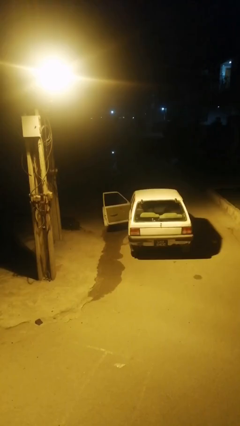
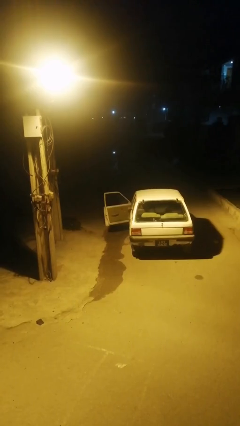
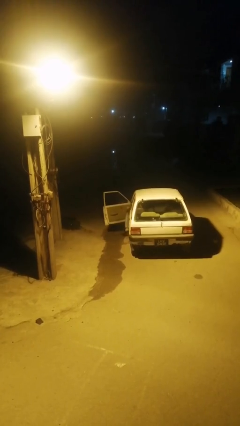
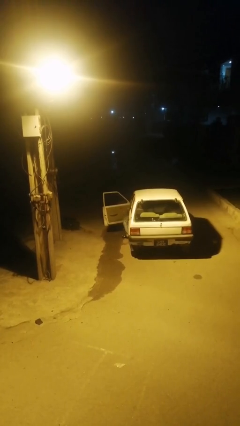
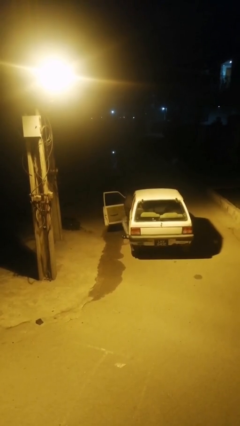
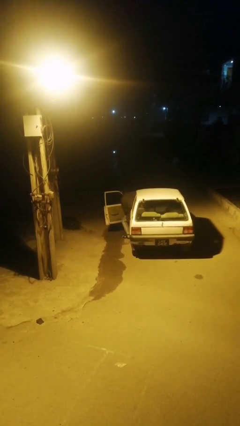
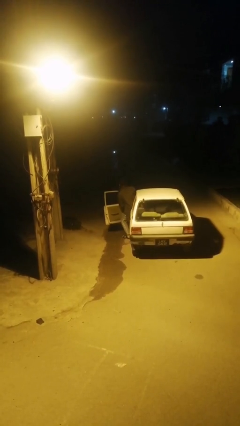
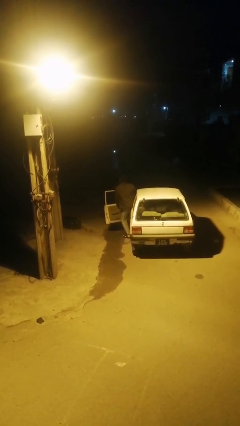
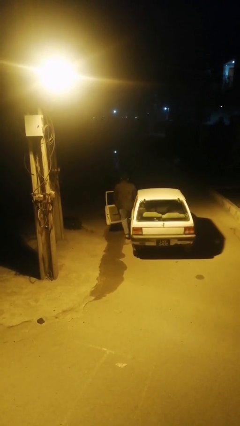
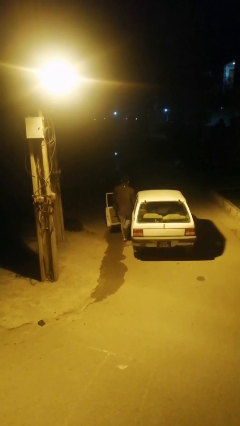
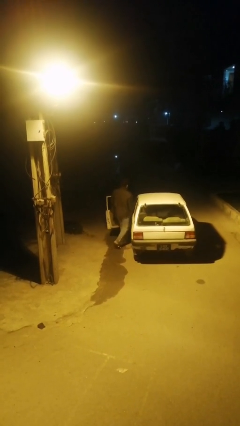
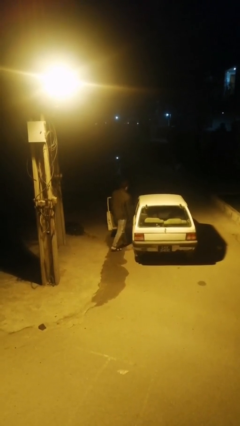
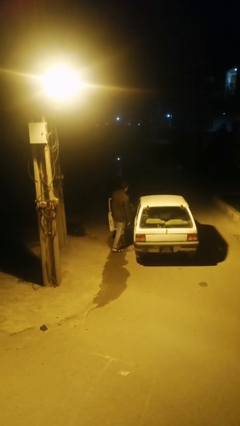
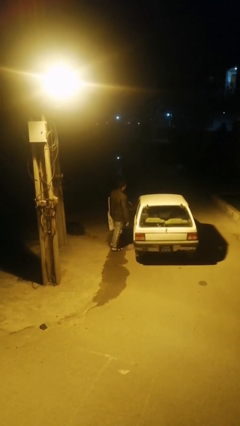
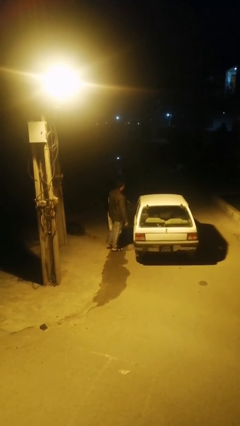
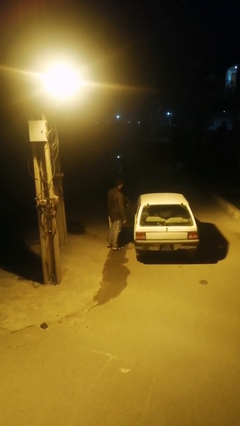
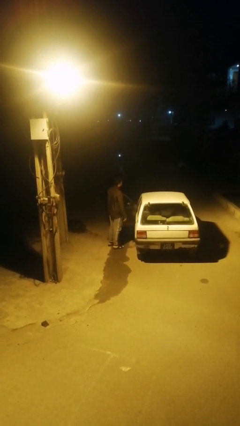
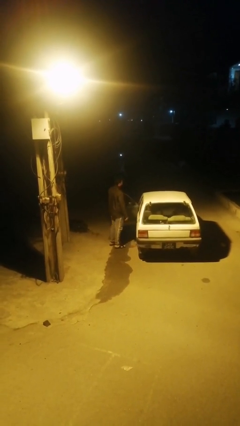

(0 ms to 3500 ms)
person exits car

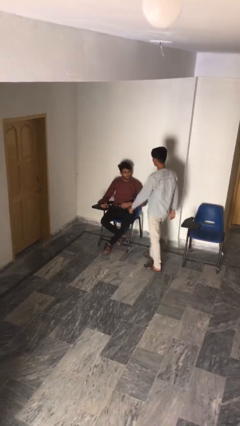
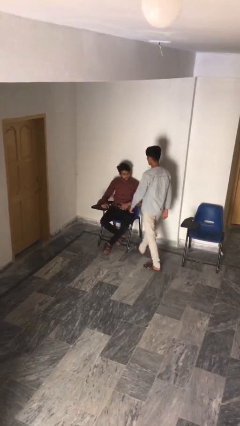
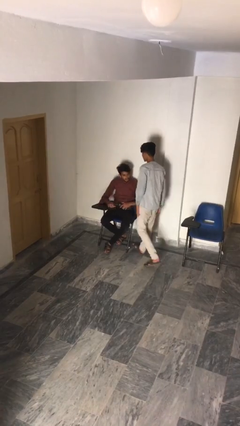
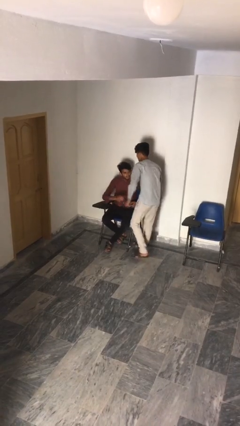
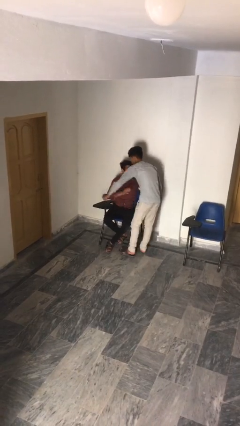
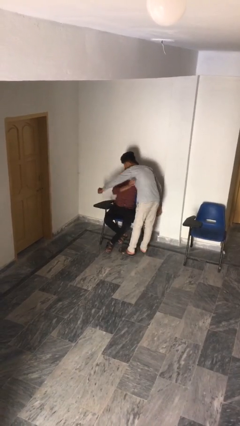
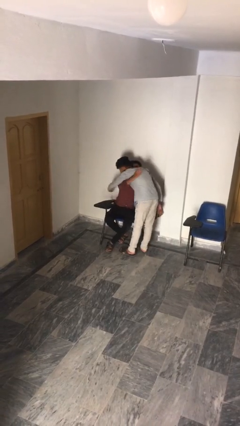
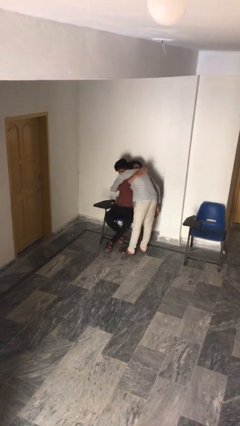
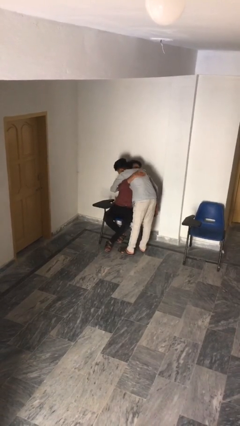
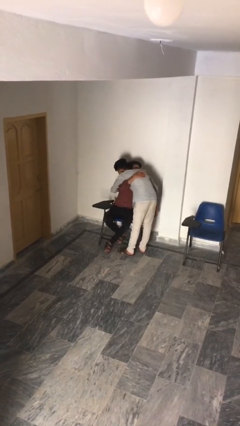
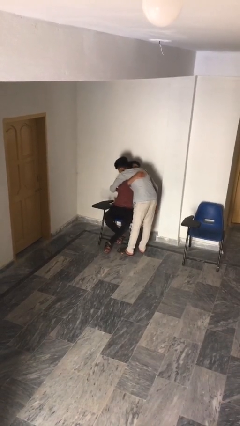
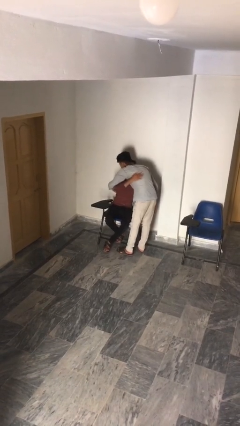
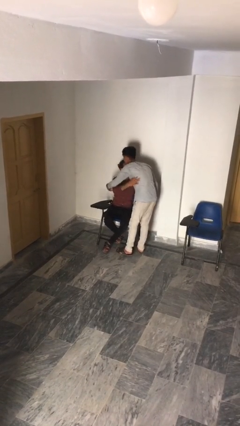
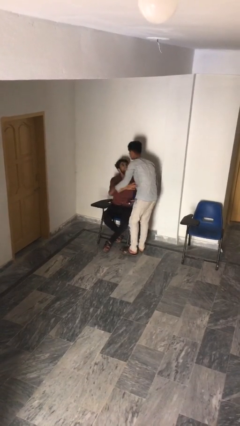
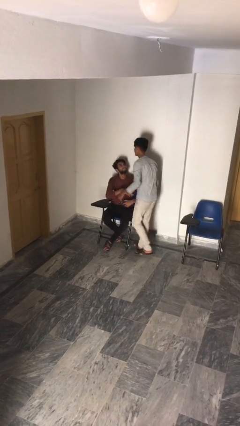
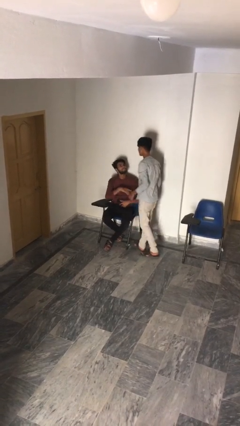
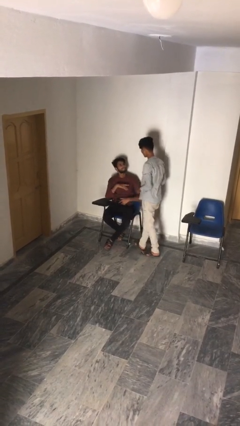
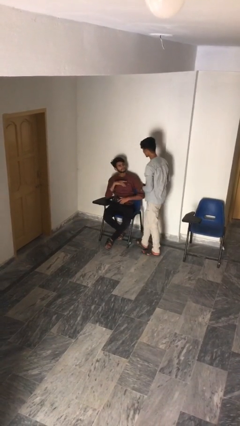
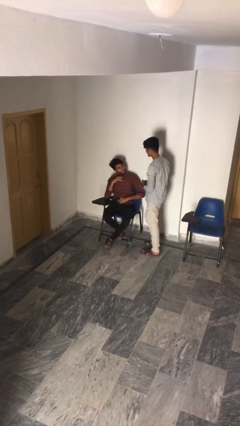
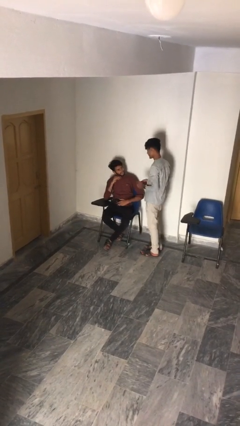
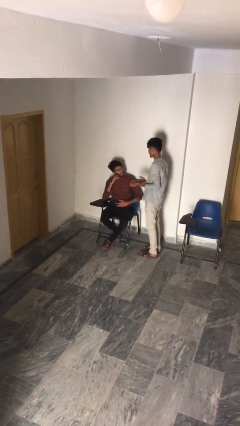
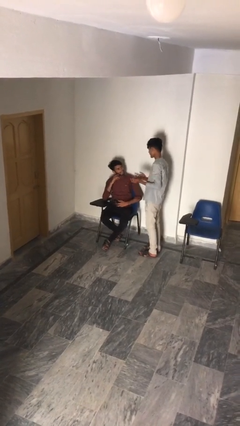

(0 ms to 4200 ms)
person embraces person

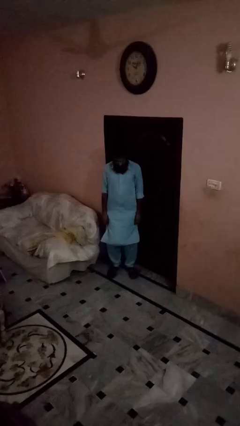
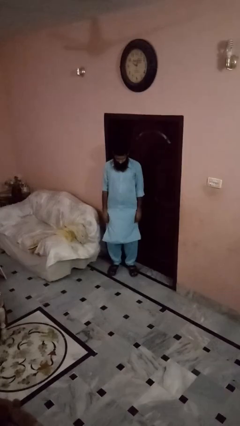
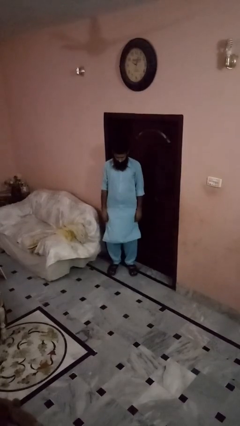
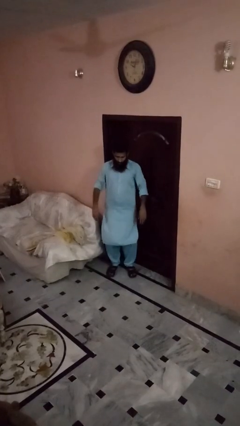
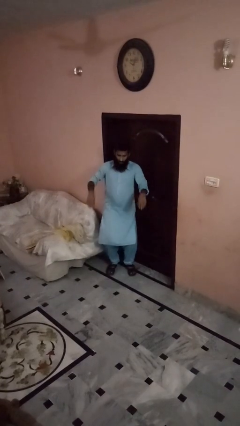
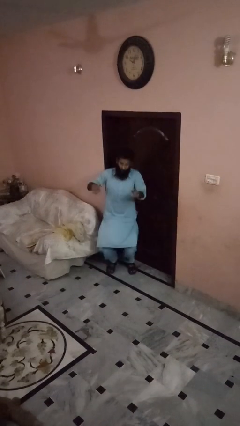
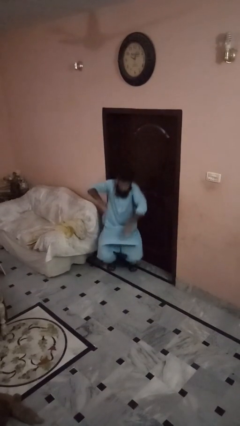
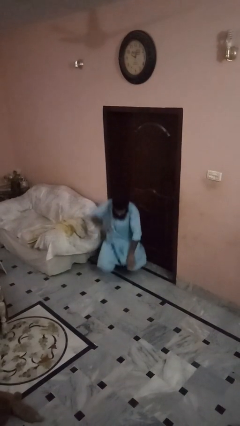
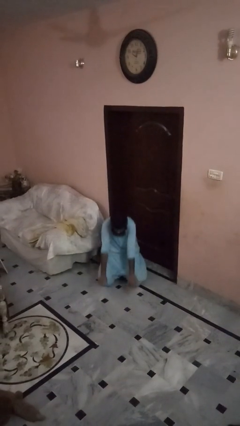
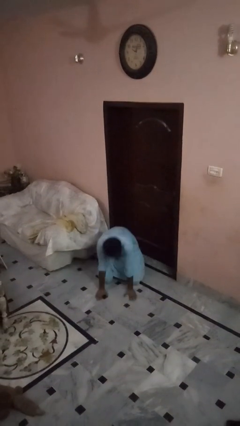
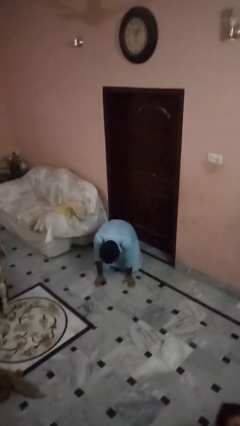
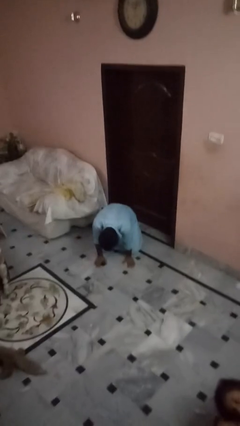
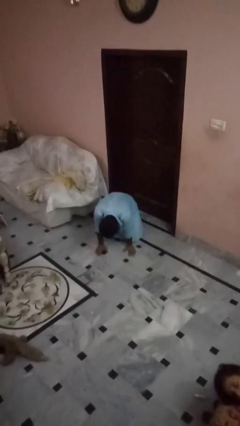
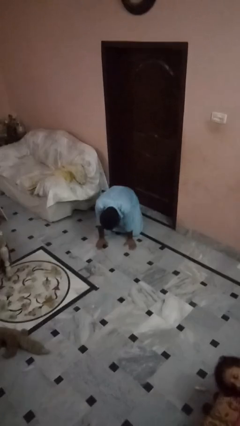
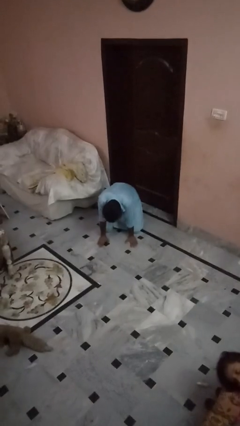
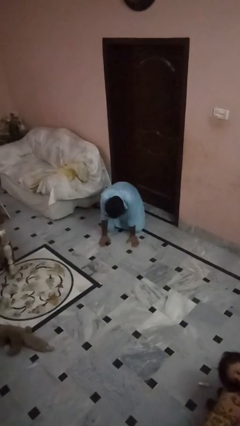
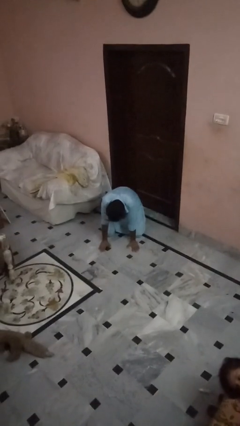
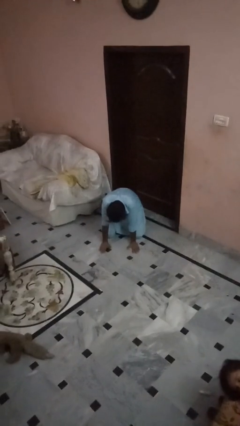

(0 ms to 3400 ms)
person falls while standing

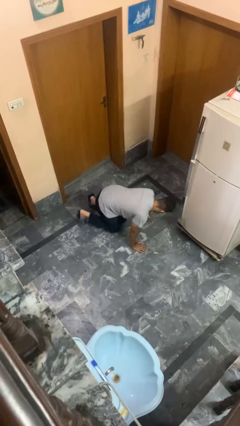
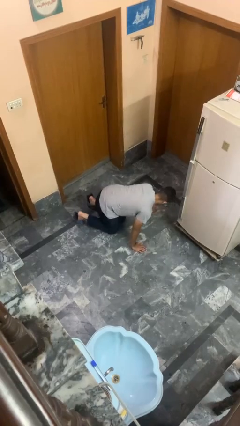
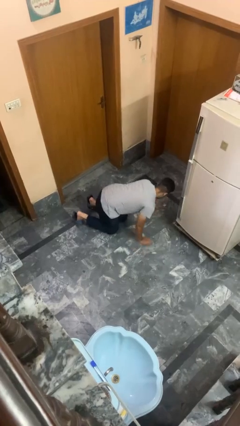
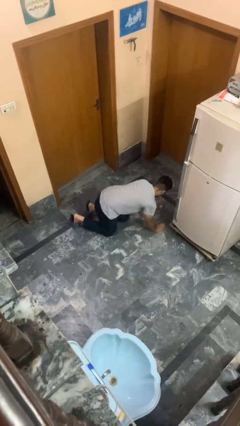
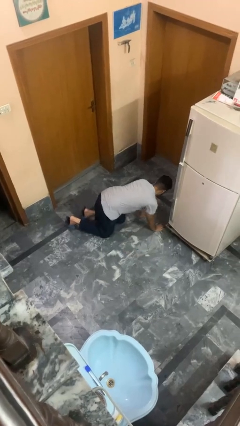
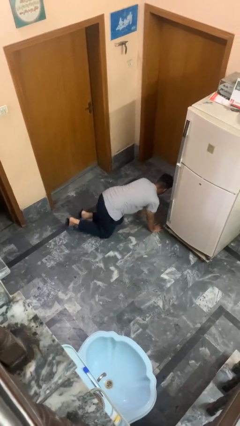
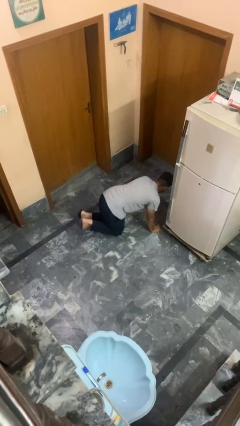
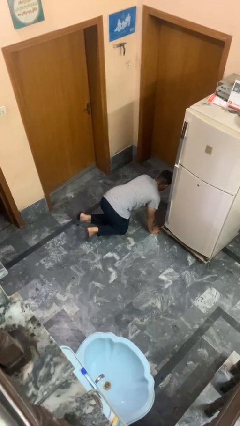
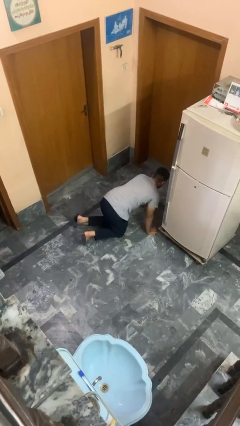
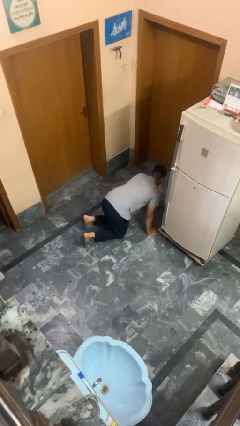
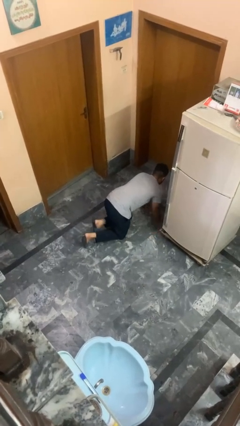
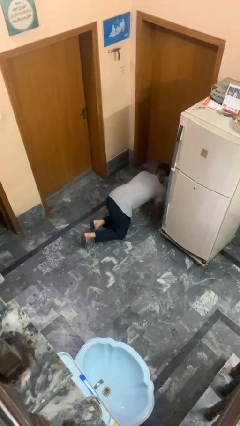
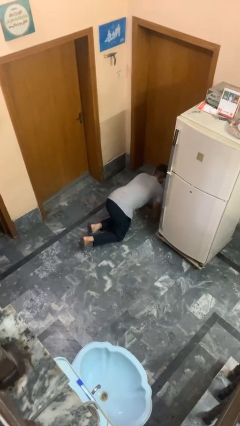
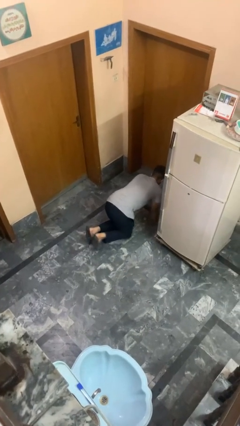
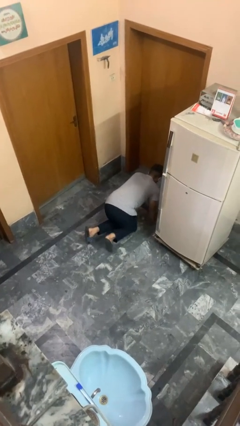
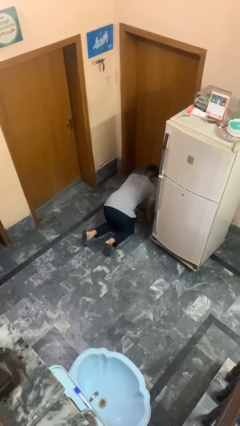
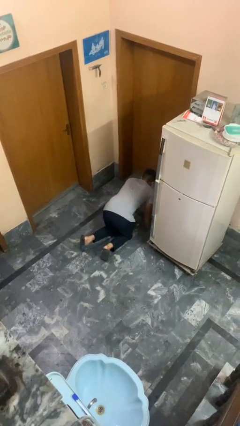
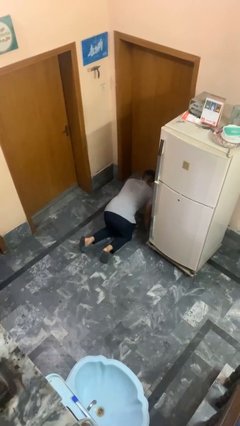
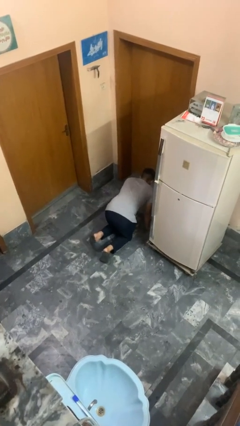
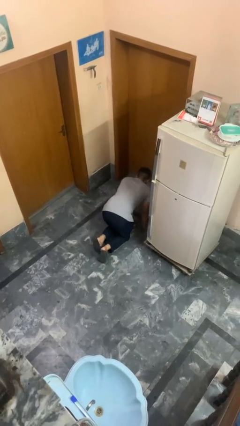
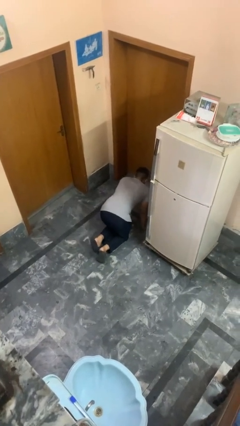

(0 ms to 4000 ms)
person crawls

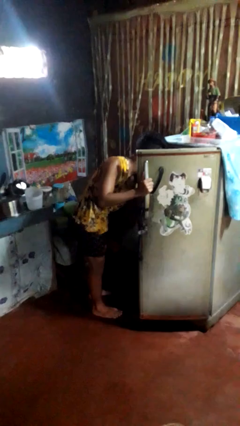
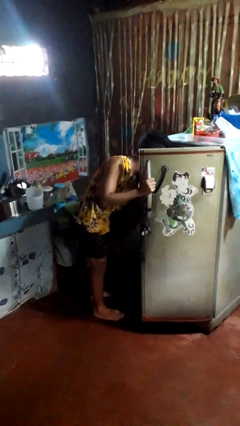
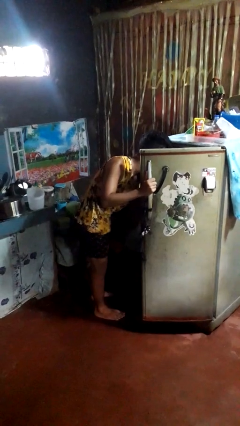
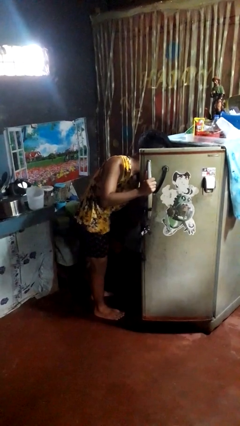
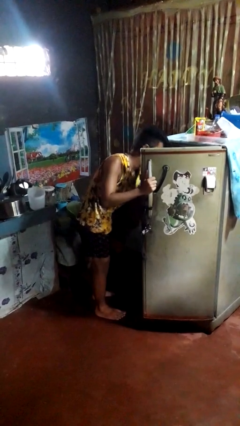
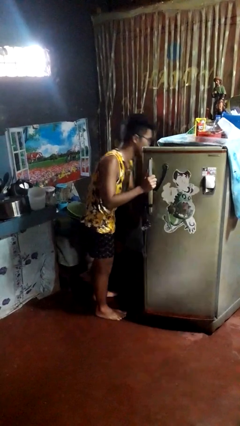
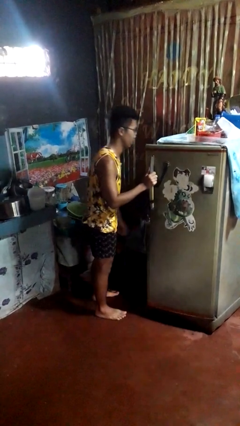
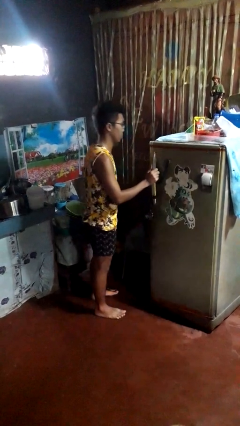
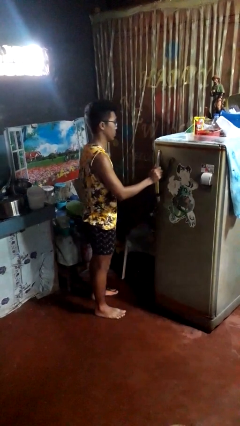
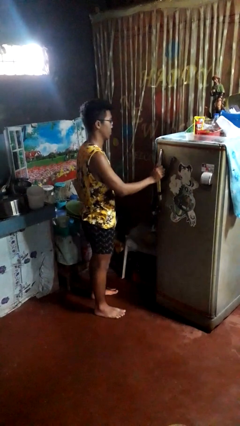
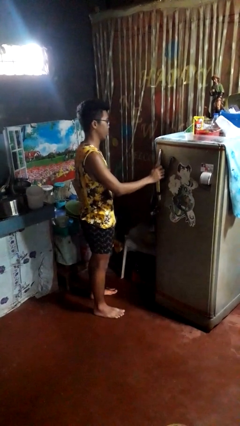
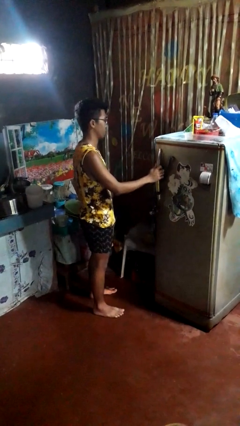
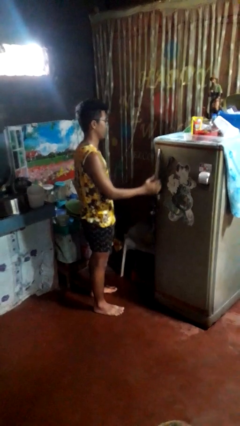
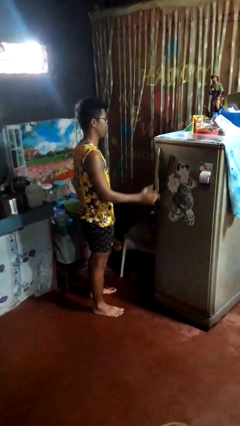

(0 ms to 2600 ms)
person closes refrigerator
